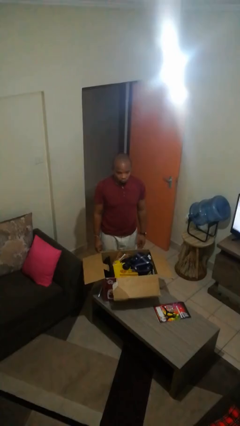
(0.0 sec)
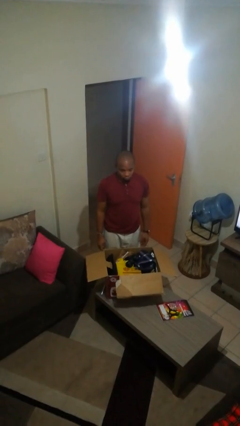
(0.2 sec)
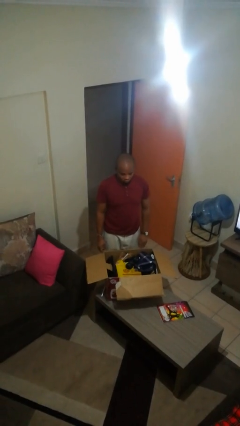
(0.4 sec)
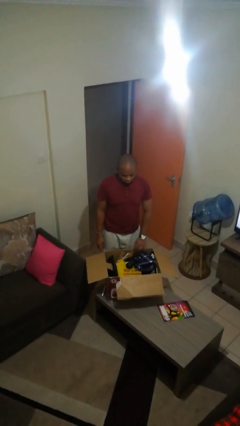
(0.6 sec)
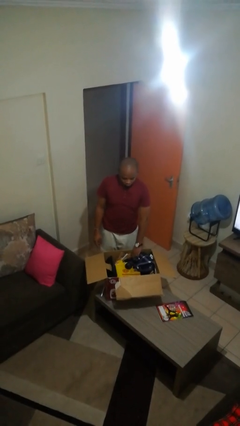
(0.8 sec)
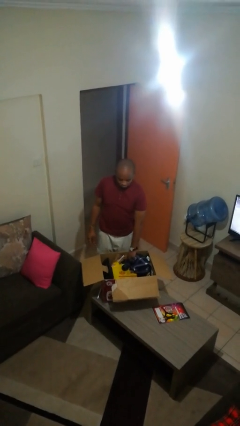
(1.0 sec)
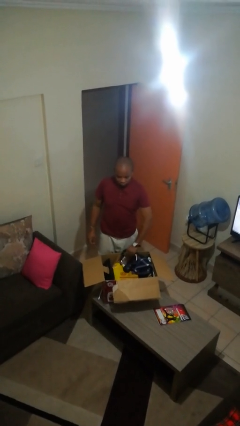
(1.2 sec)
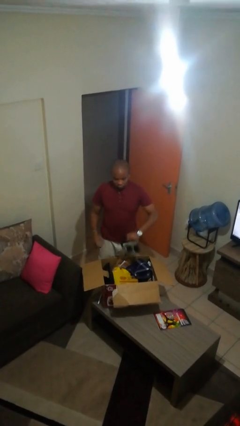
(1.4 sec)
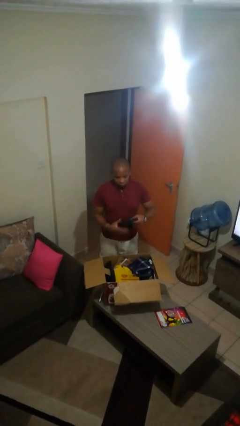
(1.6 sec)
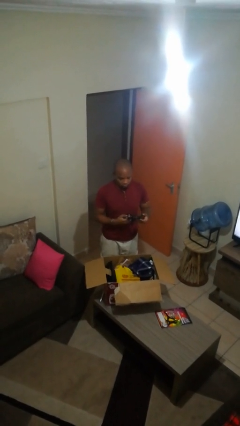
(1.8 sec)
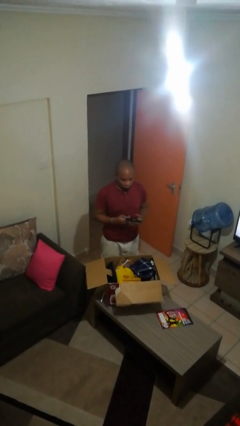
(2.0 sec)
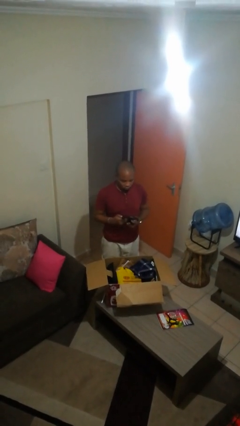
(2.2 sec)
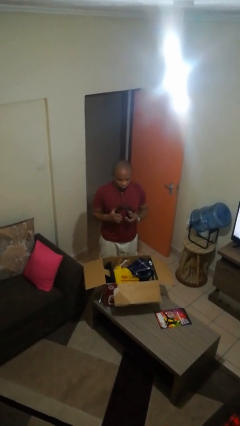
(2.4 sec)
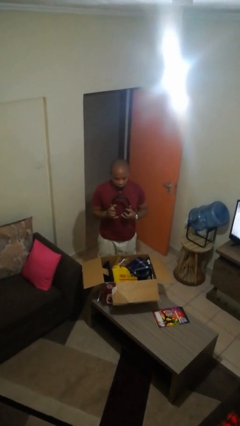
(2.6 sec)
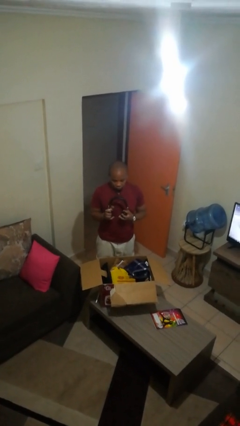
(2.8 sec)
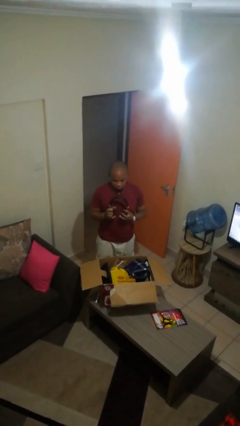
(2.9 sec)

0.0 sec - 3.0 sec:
person takes object from box

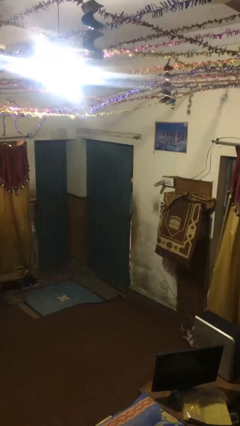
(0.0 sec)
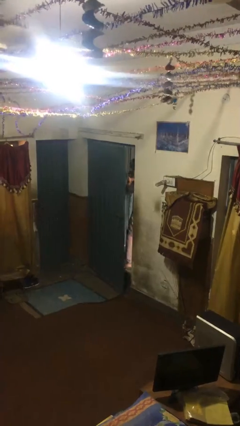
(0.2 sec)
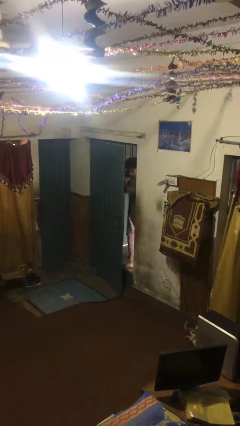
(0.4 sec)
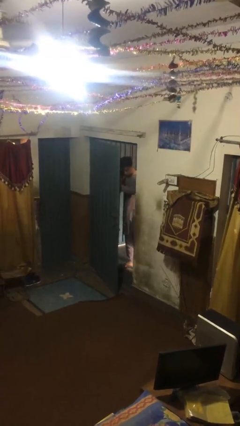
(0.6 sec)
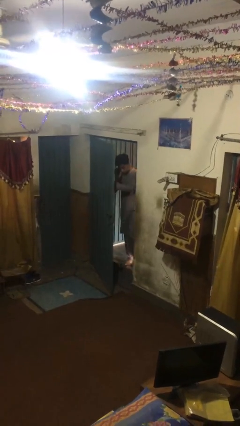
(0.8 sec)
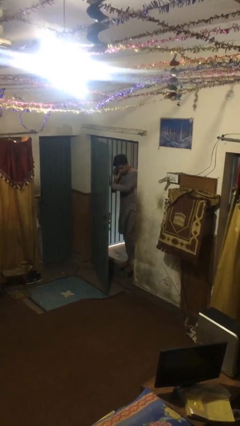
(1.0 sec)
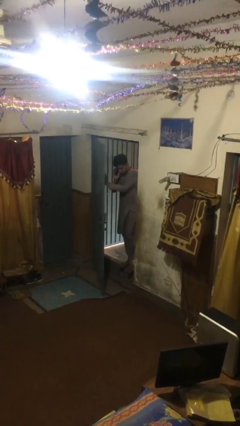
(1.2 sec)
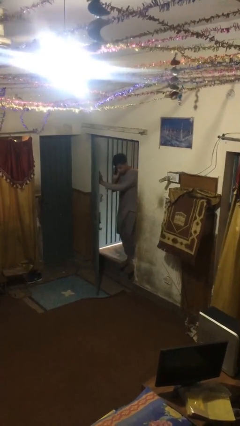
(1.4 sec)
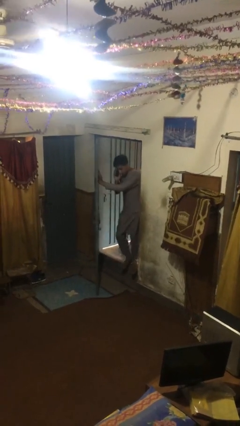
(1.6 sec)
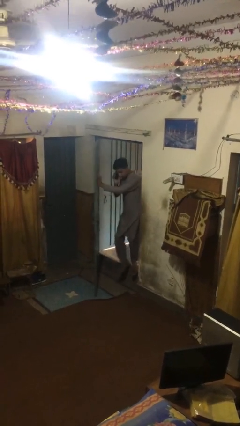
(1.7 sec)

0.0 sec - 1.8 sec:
person opens facility door

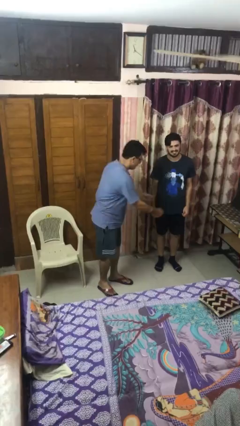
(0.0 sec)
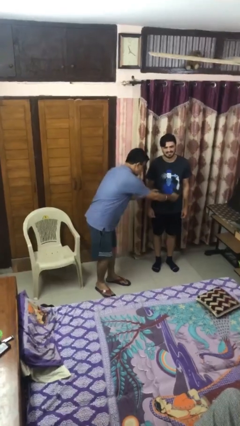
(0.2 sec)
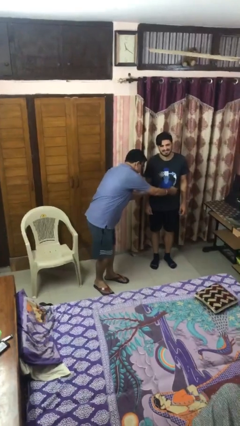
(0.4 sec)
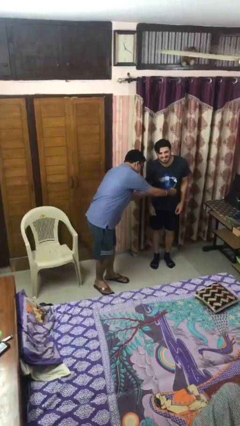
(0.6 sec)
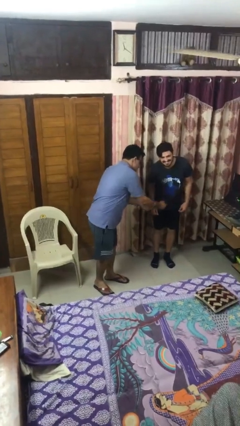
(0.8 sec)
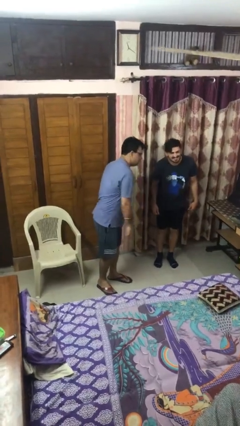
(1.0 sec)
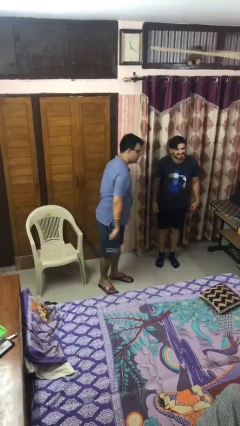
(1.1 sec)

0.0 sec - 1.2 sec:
person tickles person

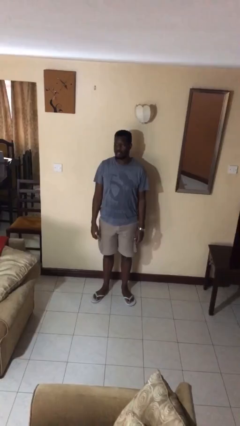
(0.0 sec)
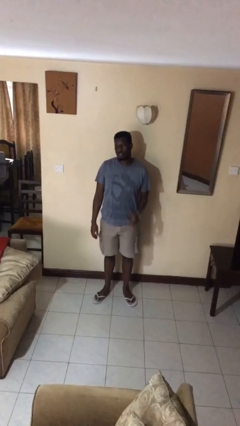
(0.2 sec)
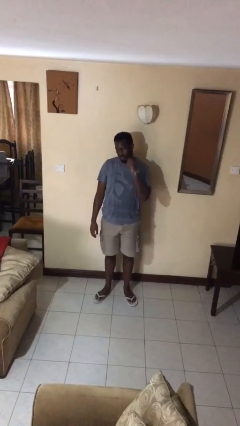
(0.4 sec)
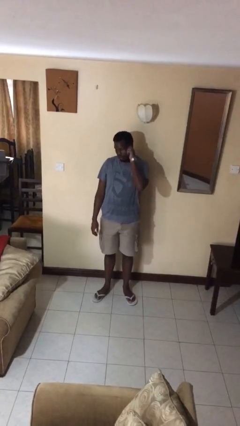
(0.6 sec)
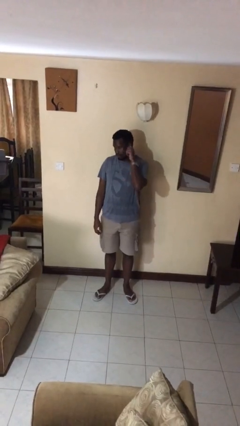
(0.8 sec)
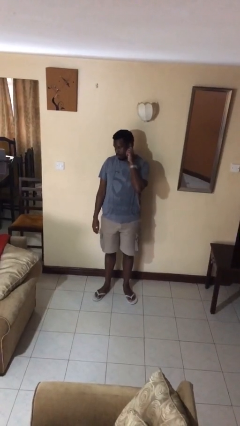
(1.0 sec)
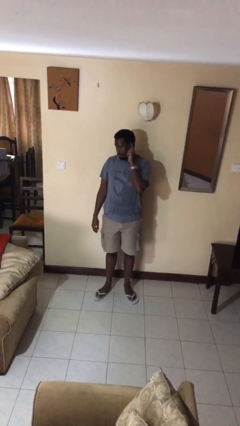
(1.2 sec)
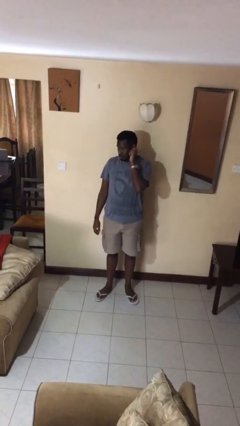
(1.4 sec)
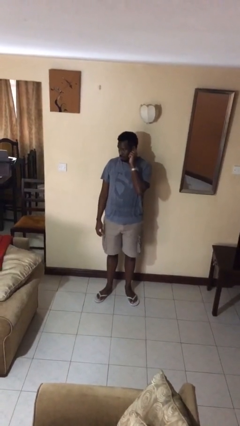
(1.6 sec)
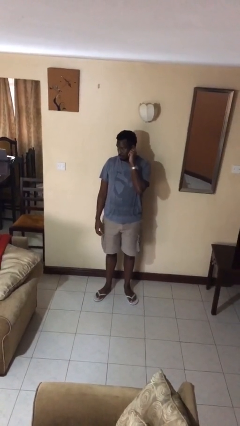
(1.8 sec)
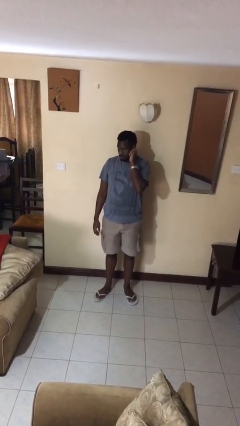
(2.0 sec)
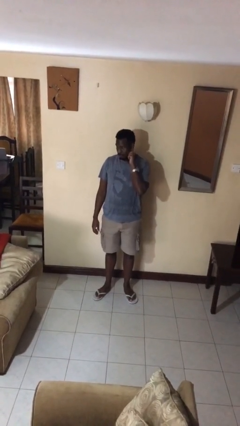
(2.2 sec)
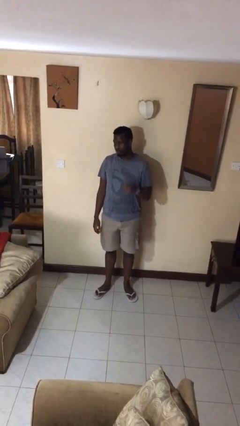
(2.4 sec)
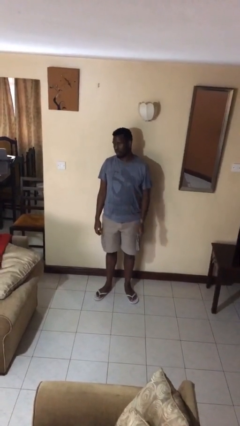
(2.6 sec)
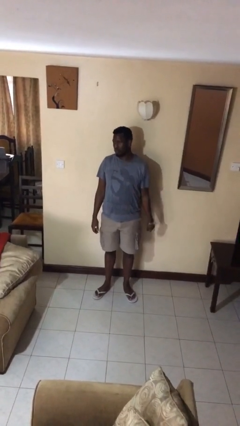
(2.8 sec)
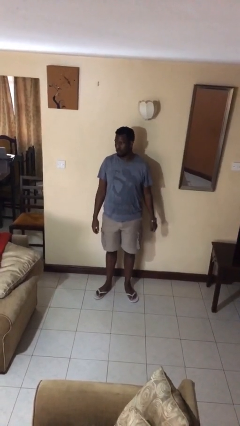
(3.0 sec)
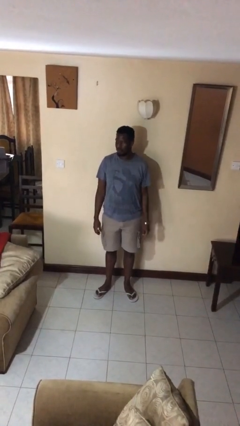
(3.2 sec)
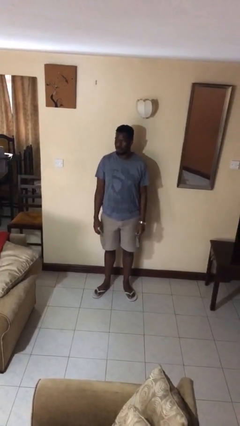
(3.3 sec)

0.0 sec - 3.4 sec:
person touches earlobe

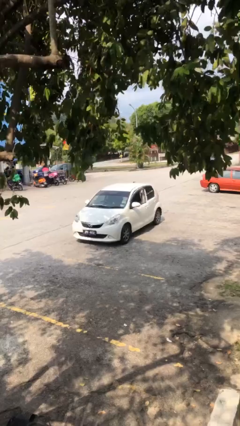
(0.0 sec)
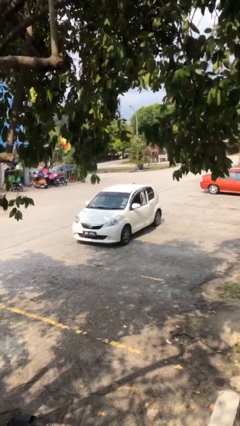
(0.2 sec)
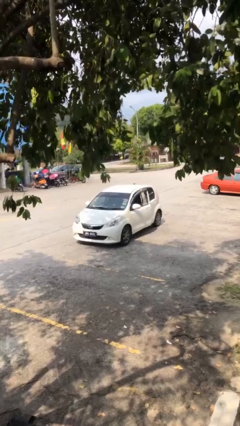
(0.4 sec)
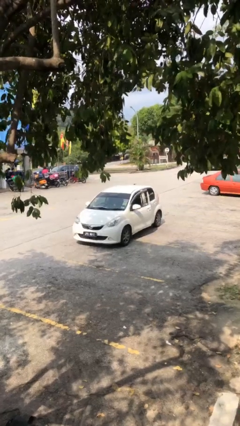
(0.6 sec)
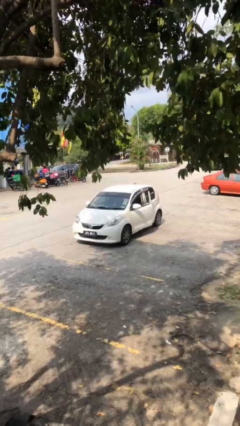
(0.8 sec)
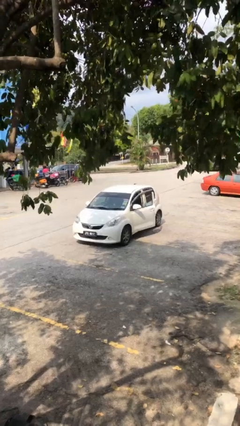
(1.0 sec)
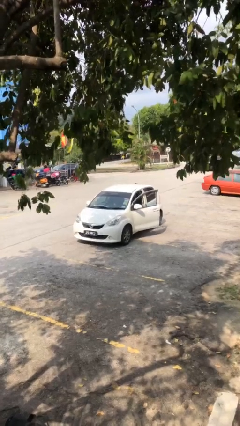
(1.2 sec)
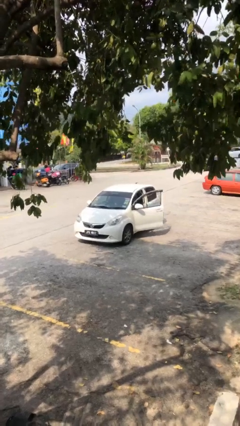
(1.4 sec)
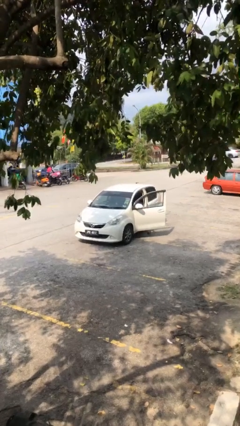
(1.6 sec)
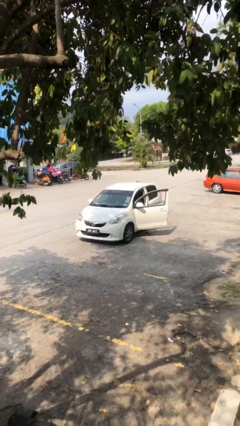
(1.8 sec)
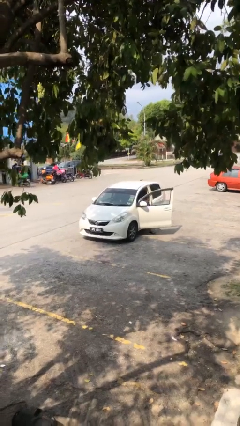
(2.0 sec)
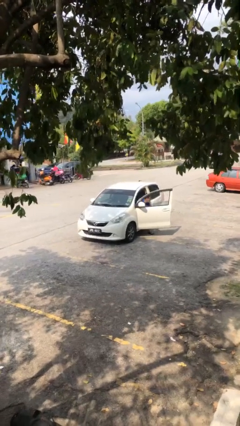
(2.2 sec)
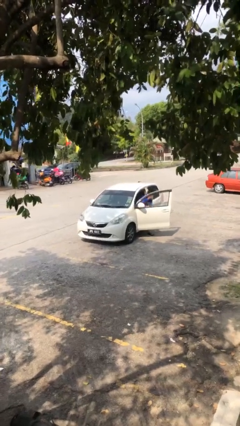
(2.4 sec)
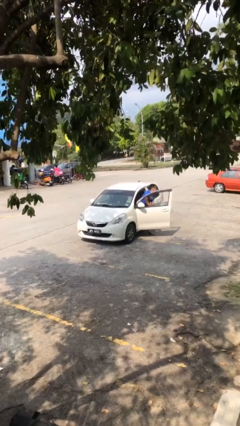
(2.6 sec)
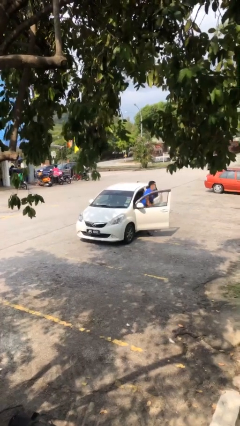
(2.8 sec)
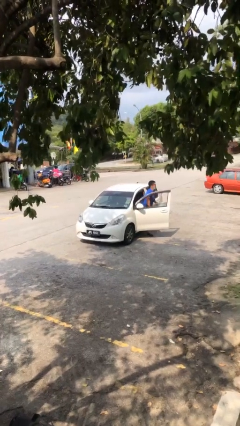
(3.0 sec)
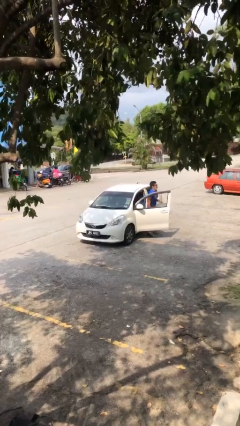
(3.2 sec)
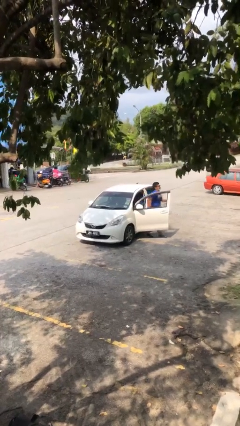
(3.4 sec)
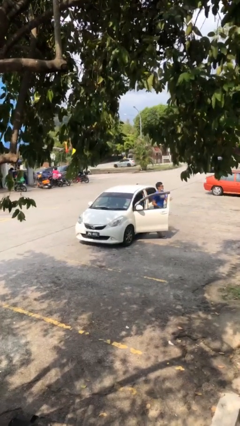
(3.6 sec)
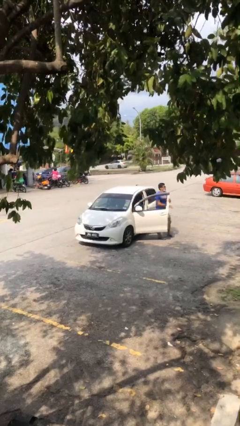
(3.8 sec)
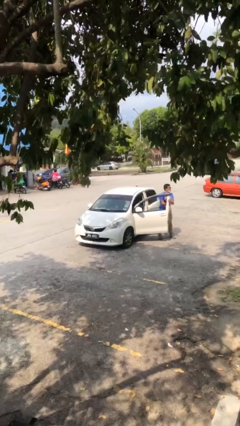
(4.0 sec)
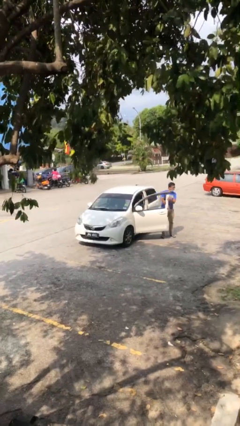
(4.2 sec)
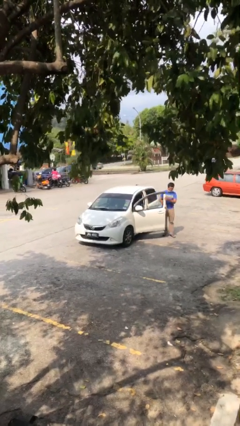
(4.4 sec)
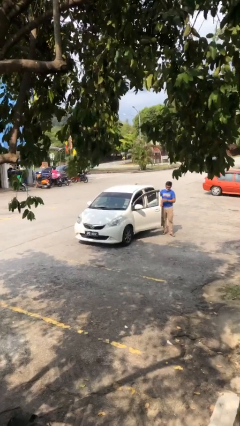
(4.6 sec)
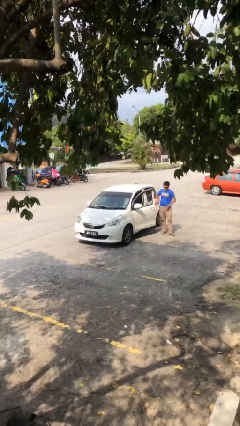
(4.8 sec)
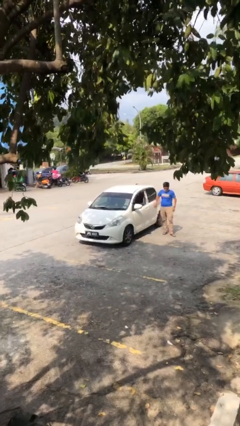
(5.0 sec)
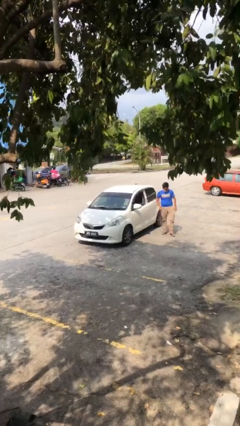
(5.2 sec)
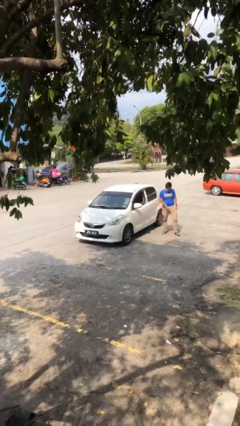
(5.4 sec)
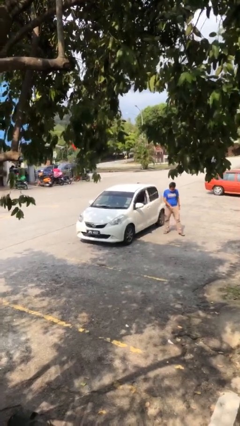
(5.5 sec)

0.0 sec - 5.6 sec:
car drops off person

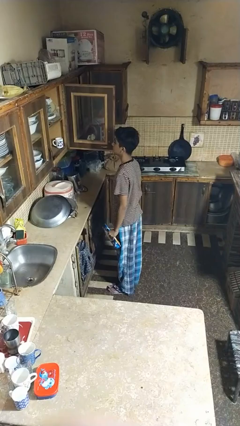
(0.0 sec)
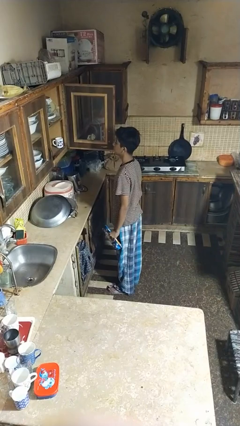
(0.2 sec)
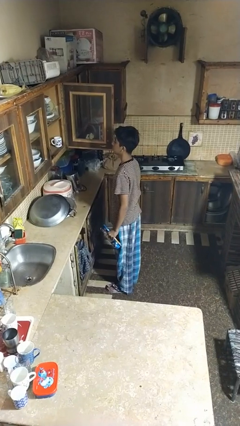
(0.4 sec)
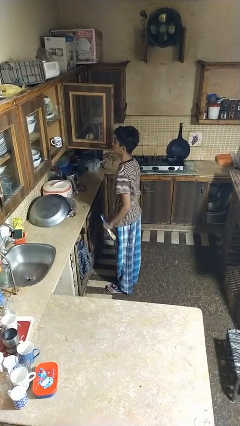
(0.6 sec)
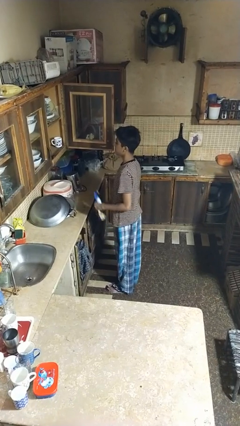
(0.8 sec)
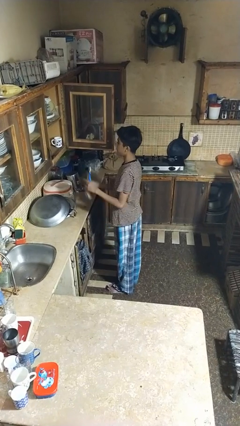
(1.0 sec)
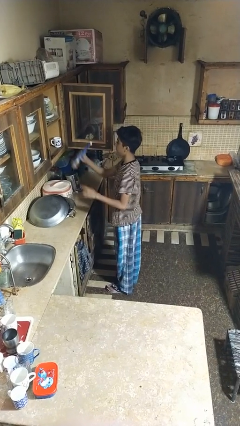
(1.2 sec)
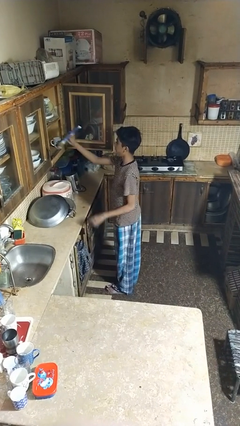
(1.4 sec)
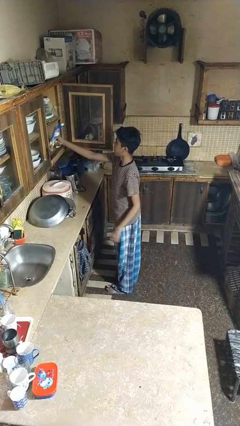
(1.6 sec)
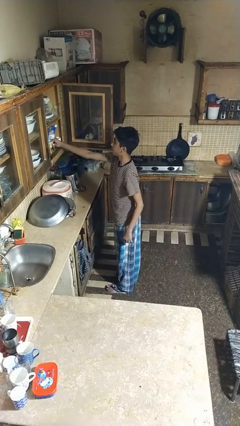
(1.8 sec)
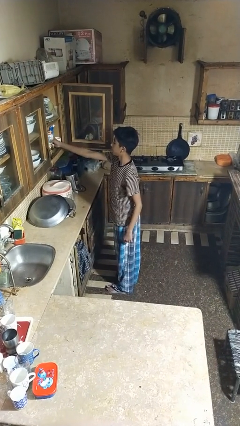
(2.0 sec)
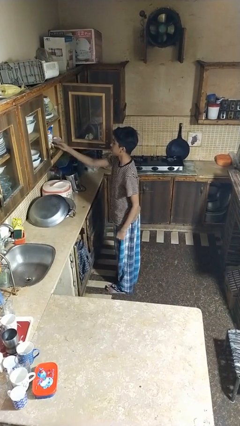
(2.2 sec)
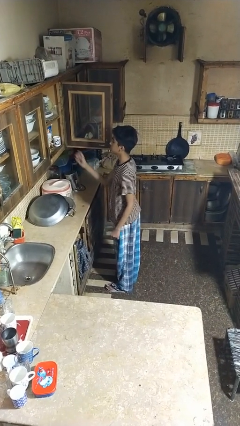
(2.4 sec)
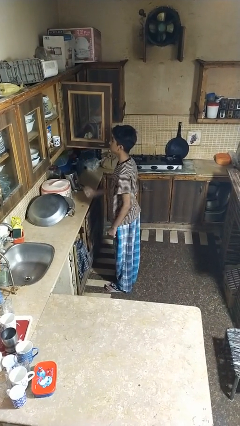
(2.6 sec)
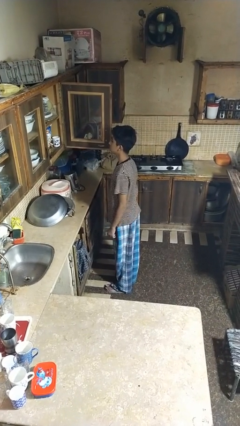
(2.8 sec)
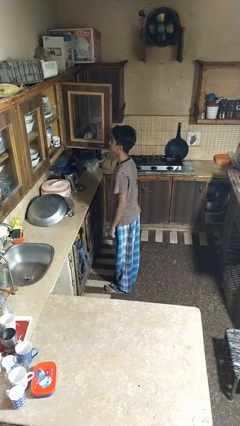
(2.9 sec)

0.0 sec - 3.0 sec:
person puts object in cabinet
